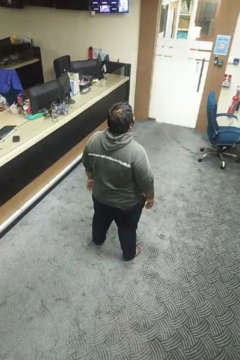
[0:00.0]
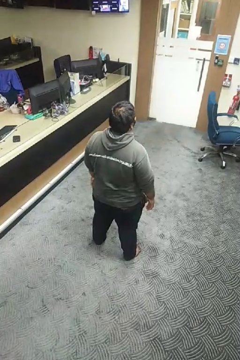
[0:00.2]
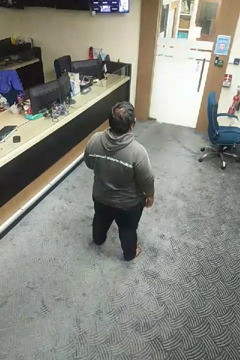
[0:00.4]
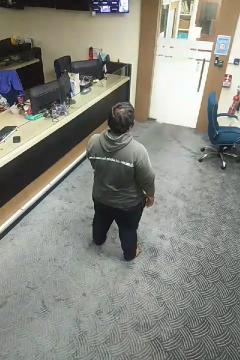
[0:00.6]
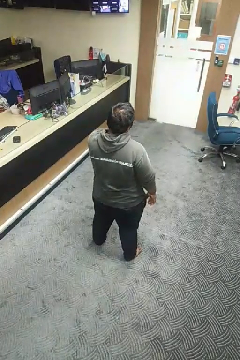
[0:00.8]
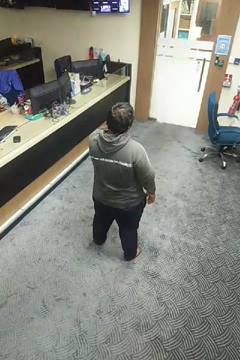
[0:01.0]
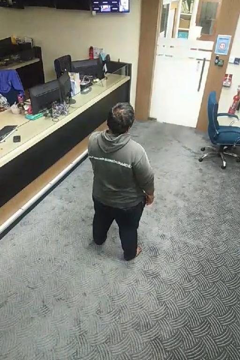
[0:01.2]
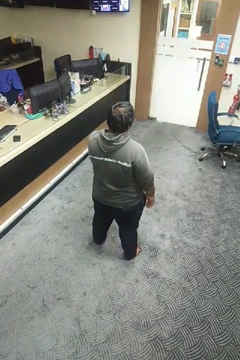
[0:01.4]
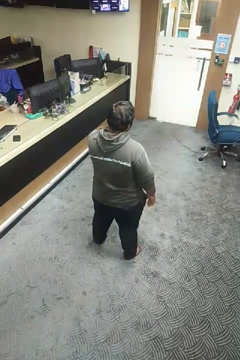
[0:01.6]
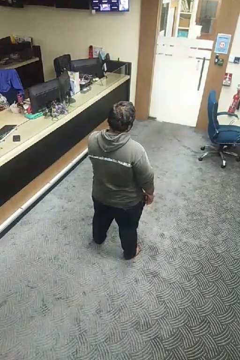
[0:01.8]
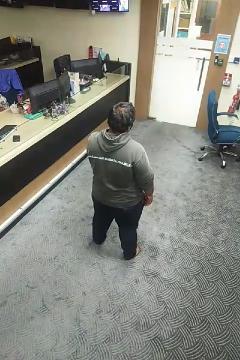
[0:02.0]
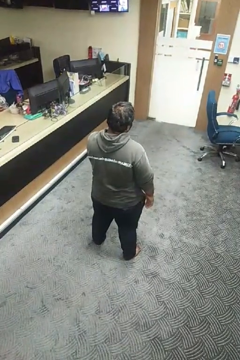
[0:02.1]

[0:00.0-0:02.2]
person rubs neck

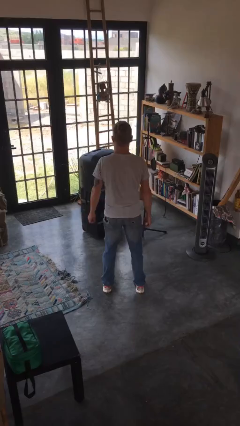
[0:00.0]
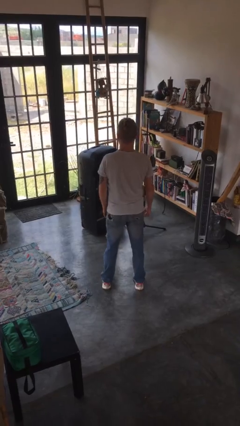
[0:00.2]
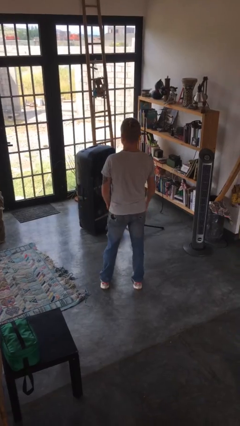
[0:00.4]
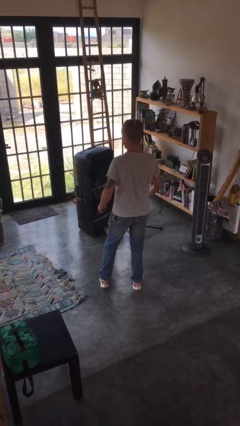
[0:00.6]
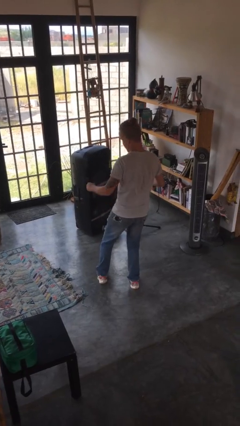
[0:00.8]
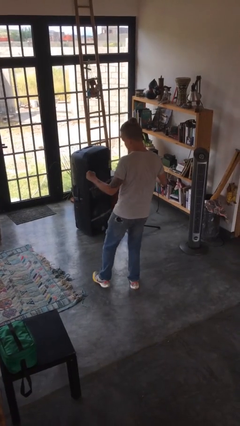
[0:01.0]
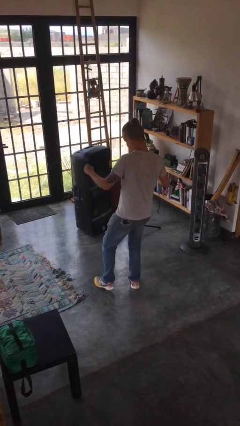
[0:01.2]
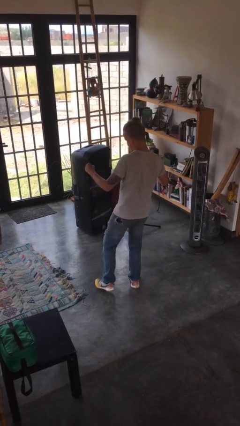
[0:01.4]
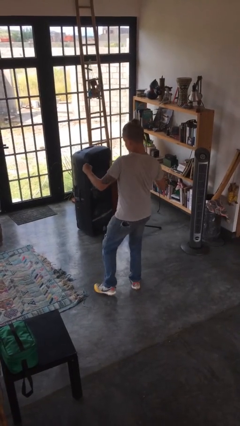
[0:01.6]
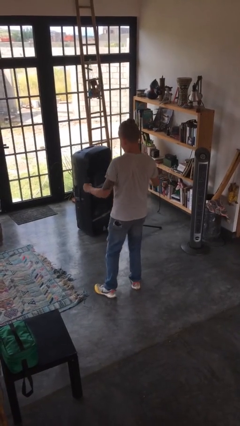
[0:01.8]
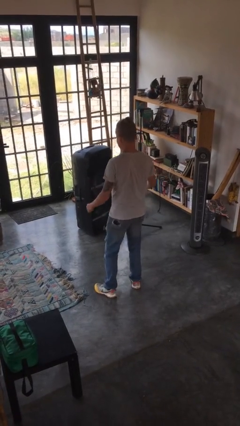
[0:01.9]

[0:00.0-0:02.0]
person wiggles hips

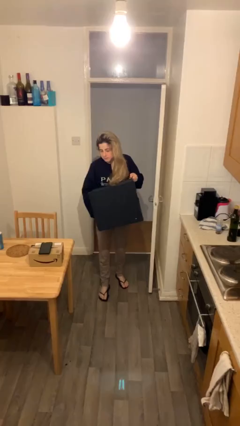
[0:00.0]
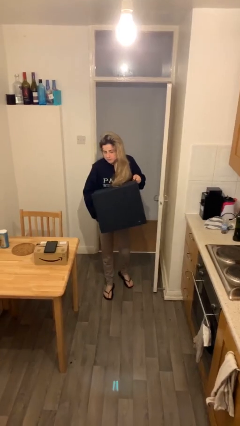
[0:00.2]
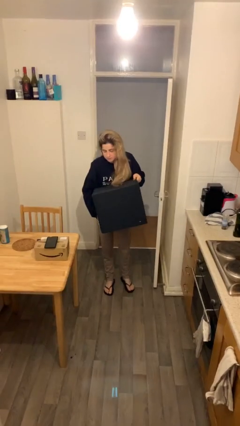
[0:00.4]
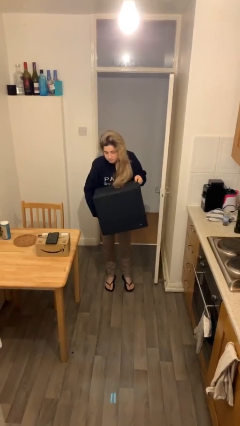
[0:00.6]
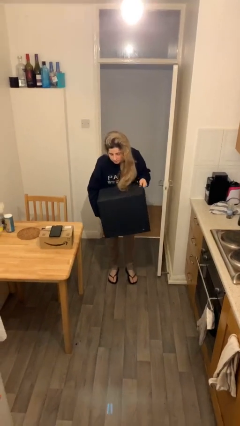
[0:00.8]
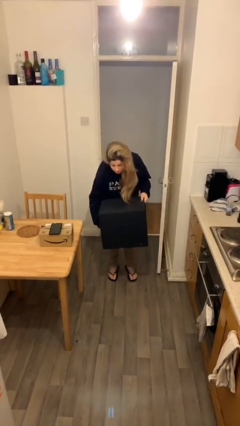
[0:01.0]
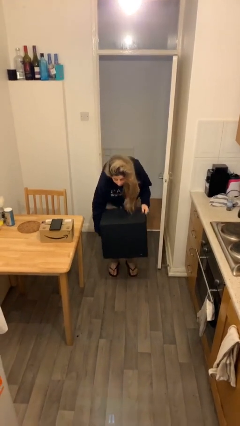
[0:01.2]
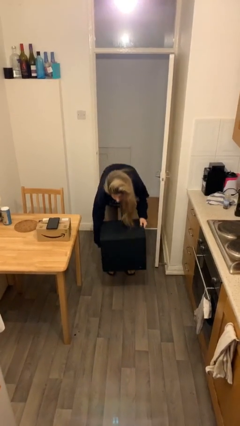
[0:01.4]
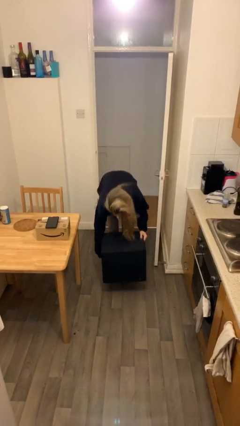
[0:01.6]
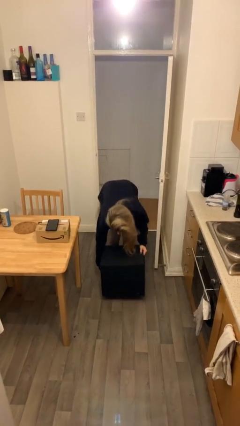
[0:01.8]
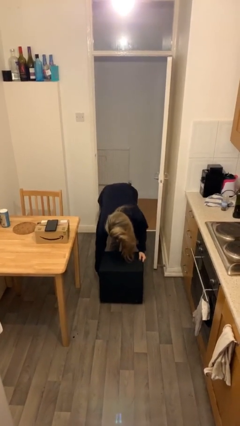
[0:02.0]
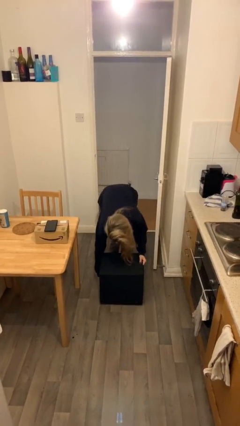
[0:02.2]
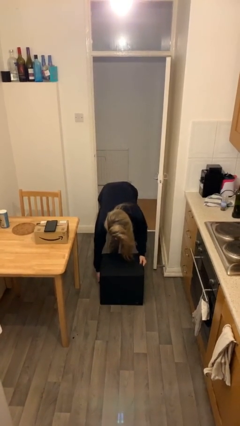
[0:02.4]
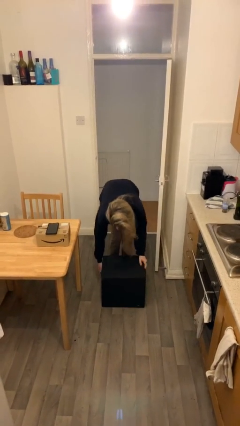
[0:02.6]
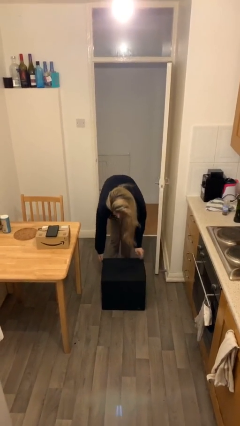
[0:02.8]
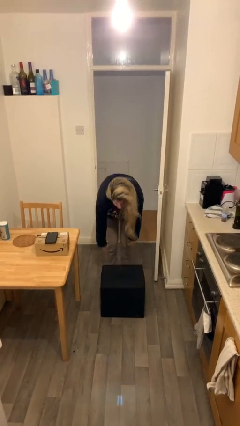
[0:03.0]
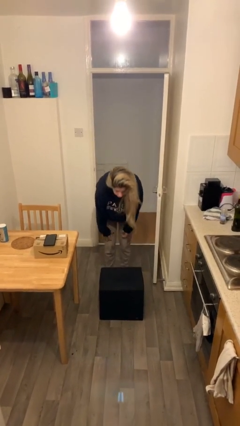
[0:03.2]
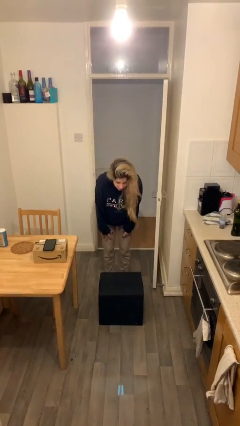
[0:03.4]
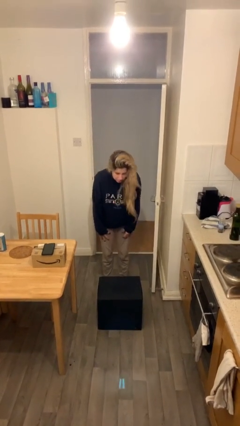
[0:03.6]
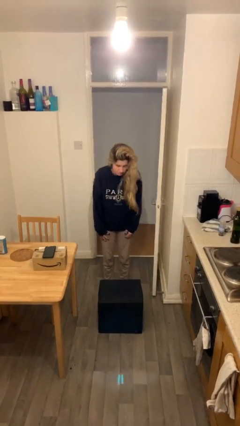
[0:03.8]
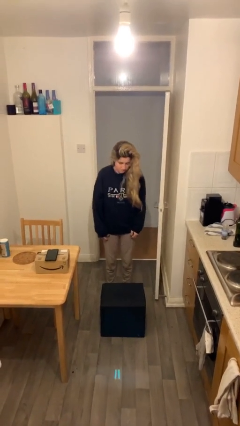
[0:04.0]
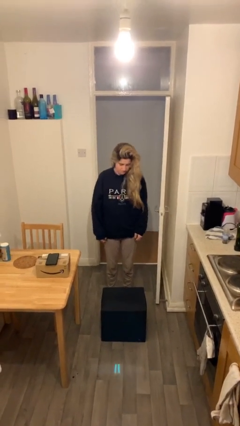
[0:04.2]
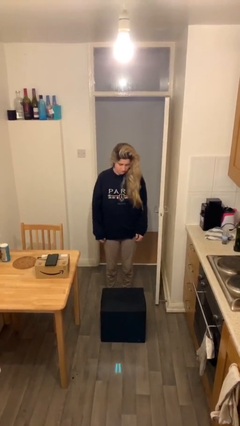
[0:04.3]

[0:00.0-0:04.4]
person puts down object on floor

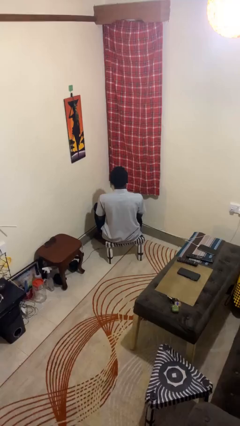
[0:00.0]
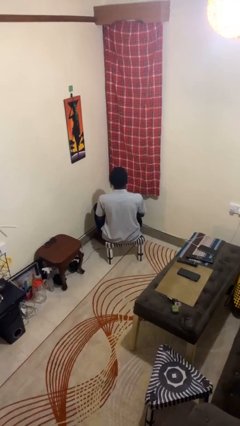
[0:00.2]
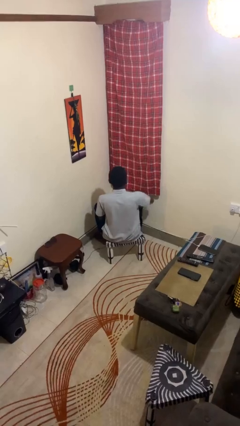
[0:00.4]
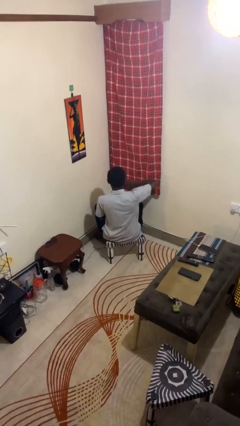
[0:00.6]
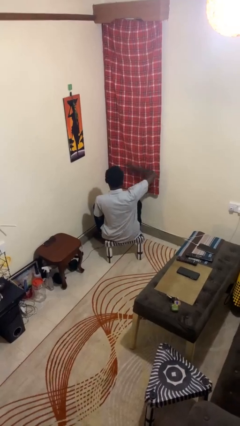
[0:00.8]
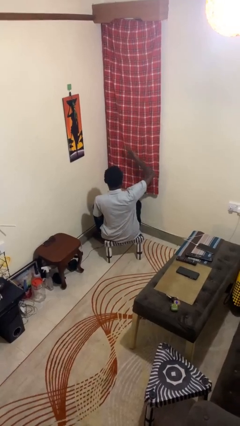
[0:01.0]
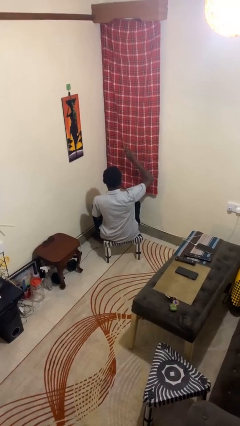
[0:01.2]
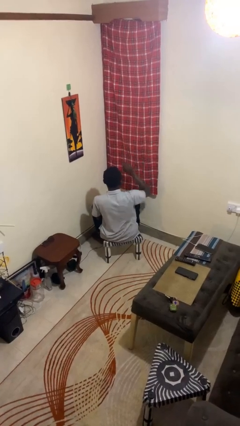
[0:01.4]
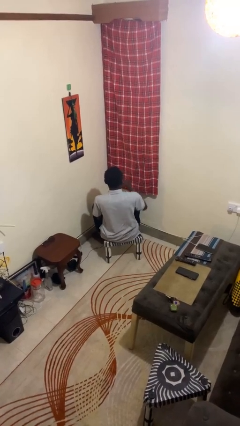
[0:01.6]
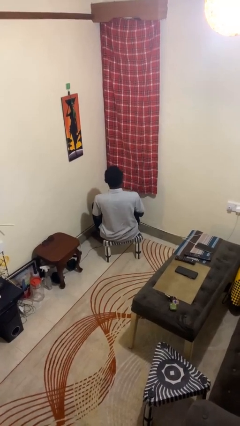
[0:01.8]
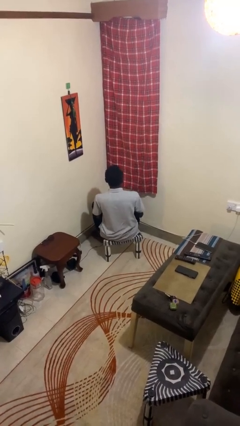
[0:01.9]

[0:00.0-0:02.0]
person gestures swipe up

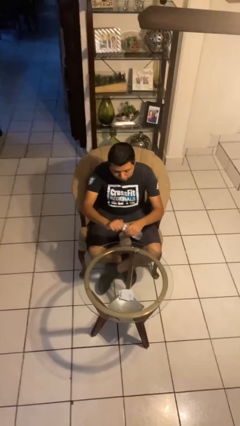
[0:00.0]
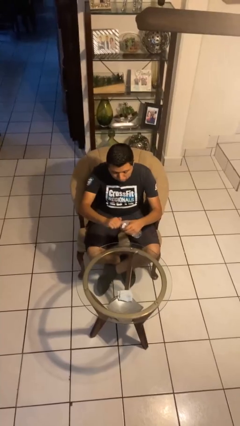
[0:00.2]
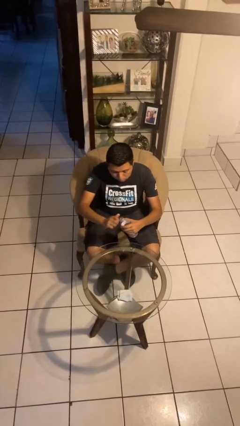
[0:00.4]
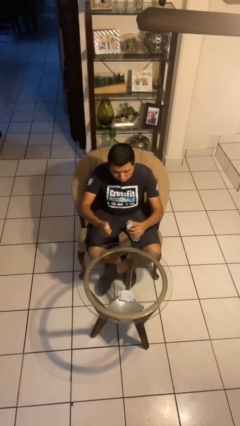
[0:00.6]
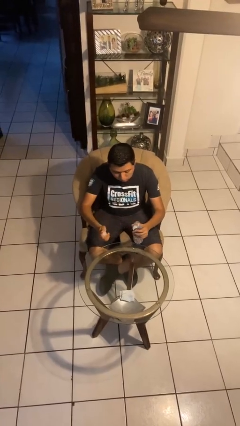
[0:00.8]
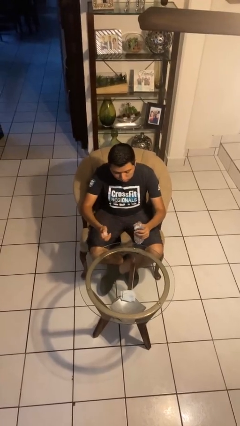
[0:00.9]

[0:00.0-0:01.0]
person unscrews lid from bottle

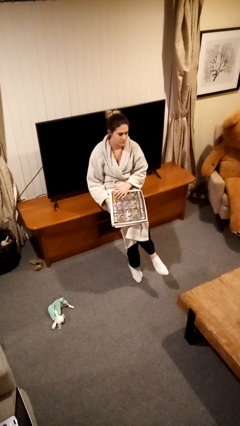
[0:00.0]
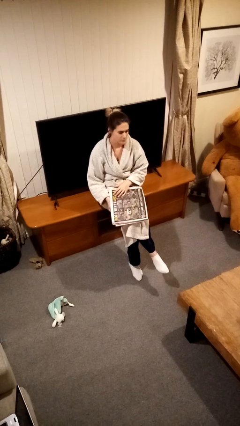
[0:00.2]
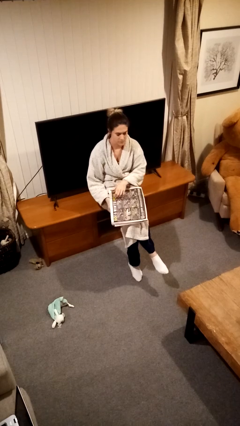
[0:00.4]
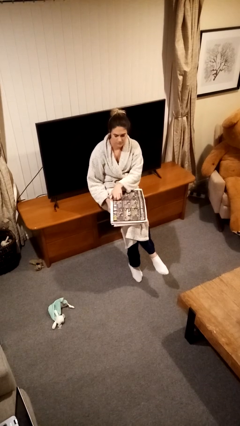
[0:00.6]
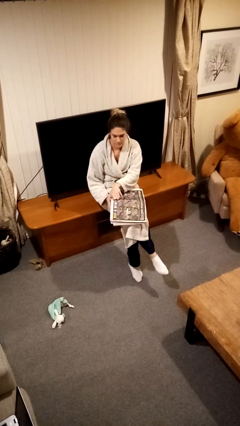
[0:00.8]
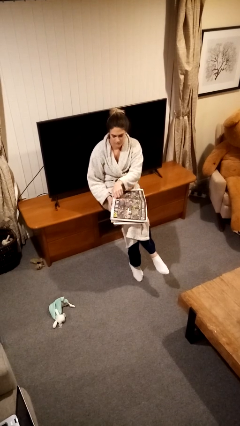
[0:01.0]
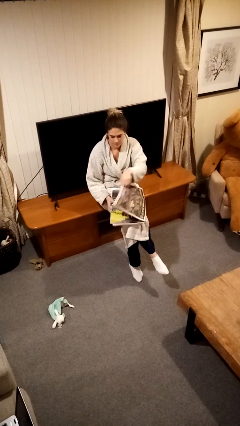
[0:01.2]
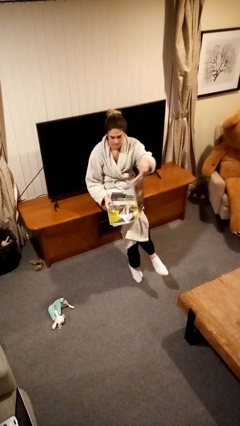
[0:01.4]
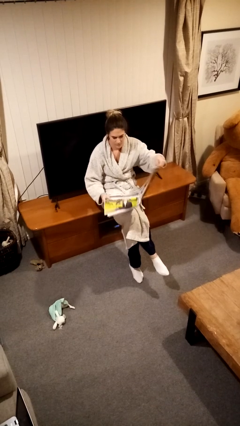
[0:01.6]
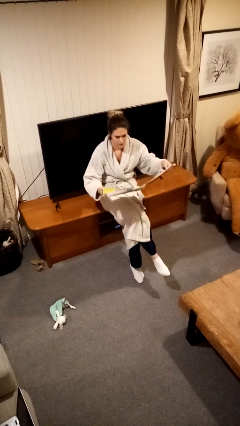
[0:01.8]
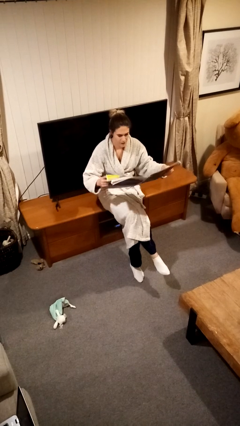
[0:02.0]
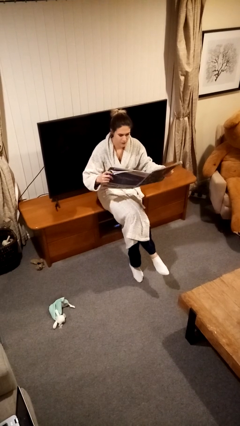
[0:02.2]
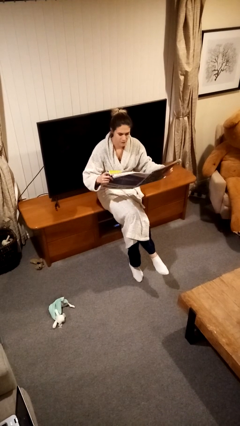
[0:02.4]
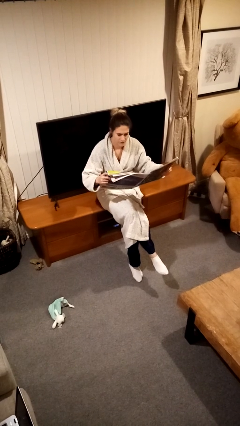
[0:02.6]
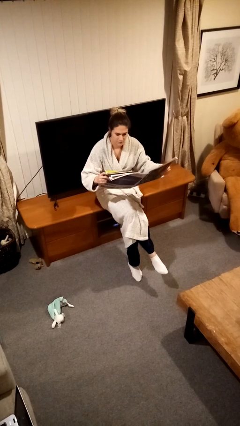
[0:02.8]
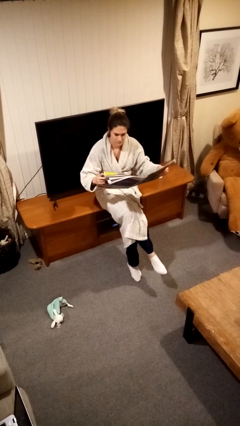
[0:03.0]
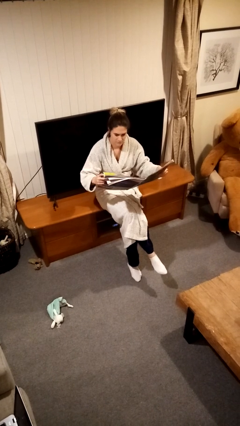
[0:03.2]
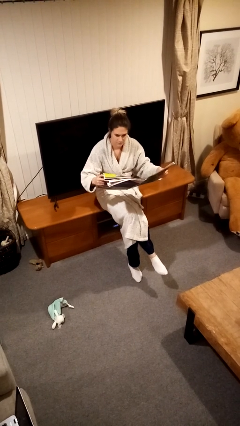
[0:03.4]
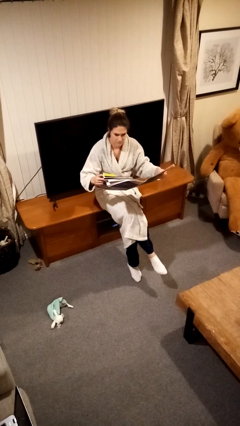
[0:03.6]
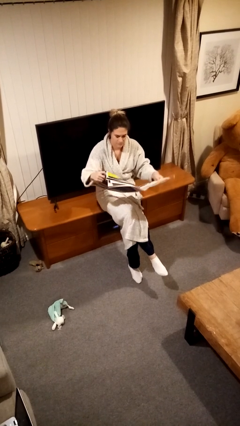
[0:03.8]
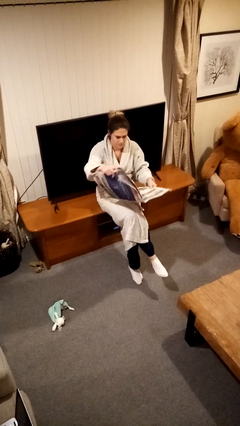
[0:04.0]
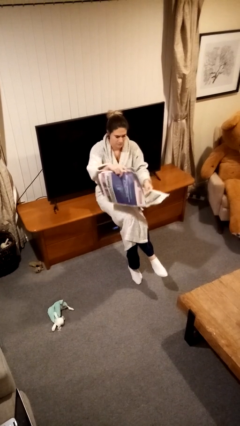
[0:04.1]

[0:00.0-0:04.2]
person reads newspaper

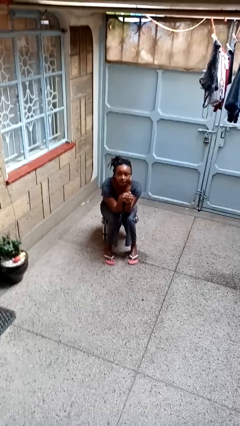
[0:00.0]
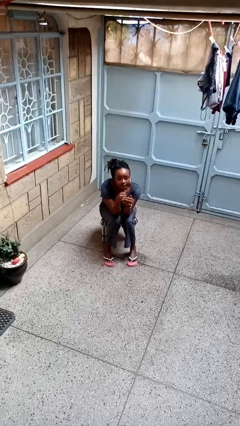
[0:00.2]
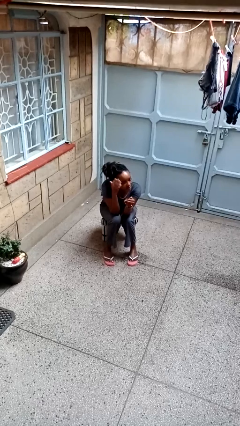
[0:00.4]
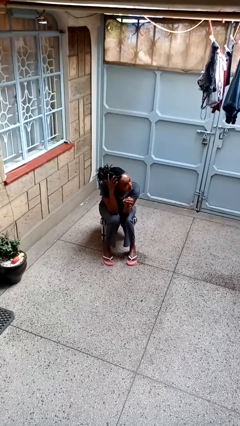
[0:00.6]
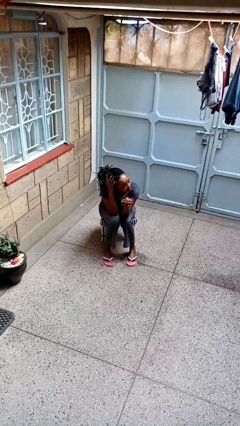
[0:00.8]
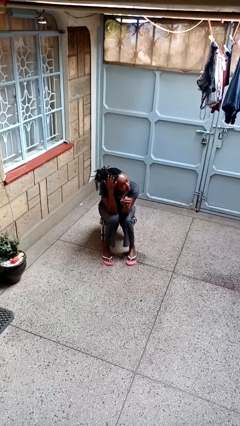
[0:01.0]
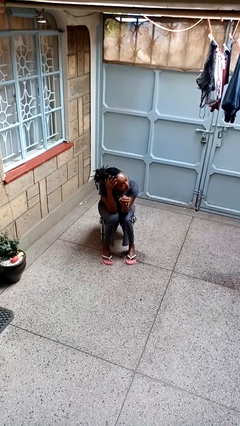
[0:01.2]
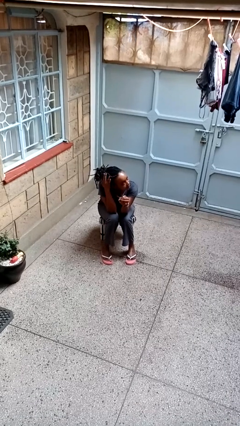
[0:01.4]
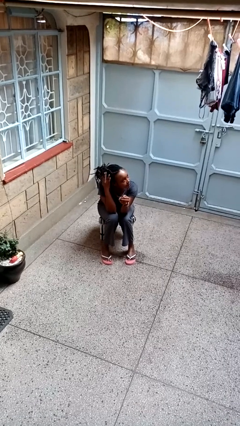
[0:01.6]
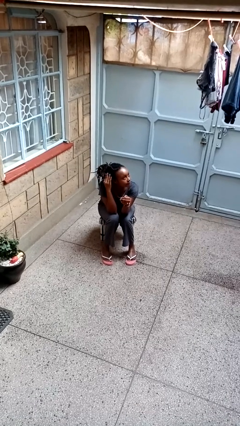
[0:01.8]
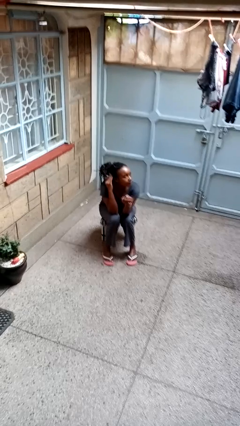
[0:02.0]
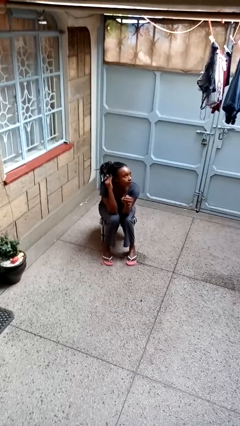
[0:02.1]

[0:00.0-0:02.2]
person strokes hair
